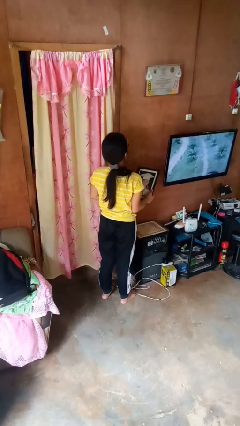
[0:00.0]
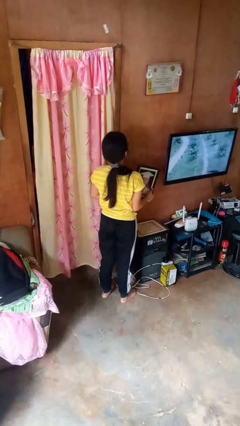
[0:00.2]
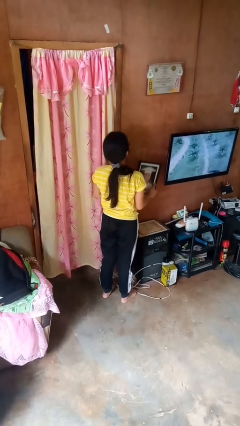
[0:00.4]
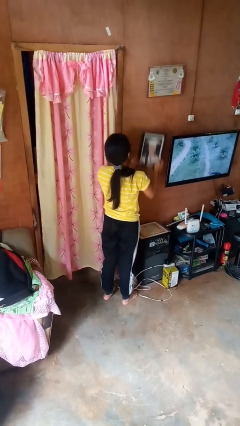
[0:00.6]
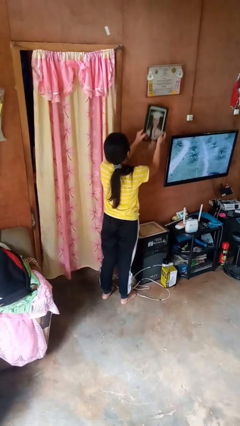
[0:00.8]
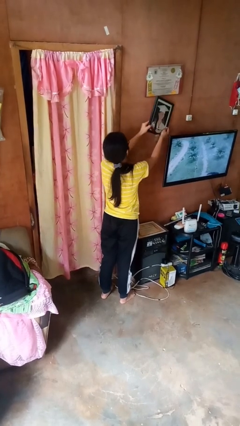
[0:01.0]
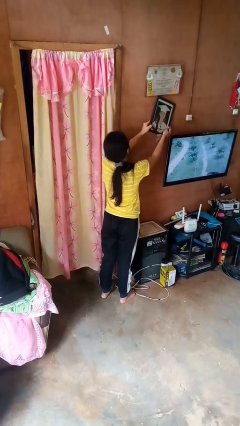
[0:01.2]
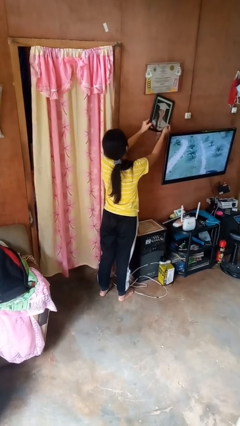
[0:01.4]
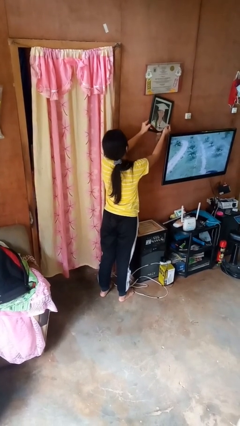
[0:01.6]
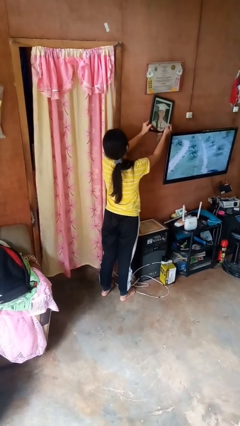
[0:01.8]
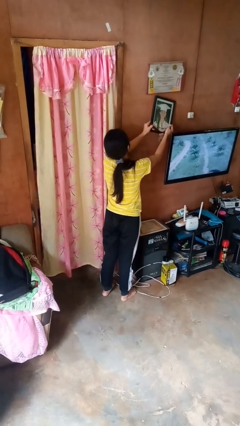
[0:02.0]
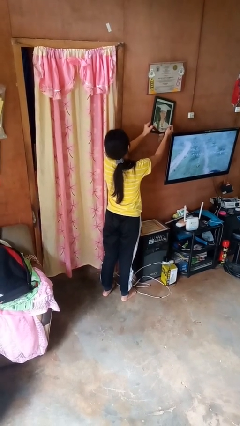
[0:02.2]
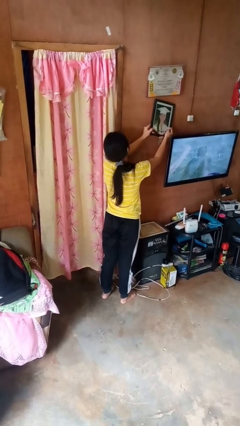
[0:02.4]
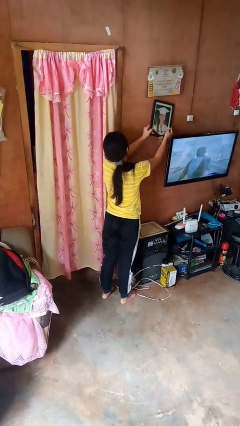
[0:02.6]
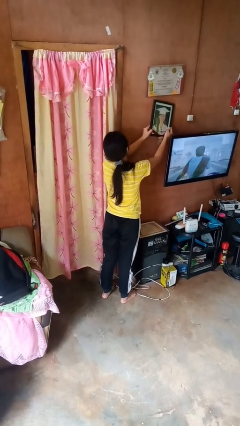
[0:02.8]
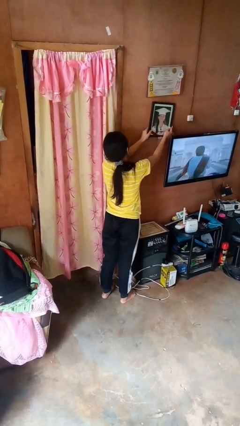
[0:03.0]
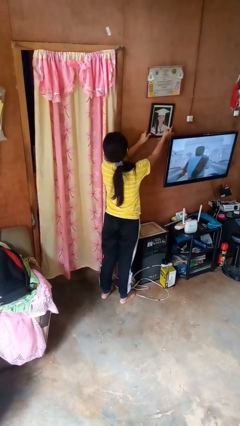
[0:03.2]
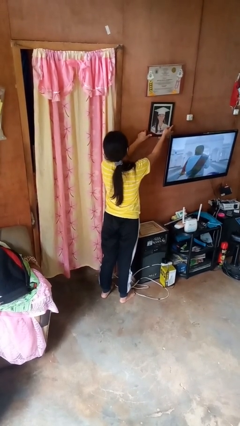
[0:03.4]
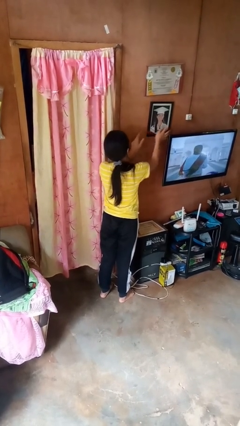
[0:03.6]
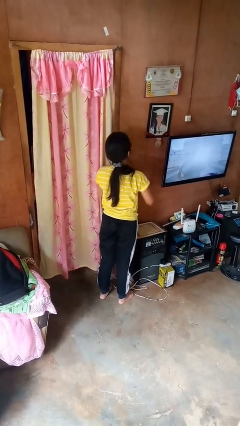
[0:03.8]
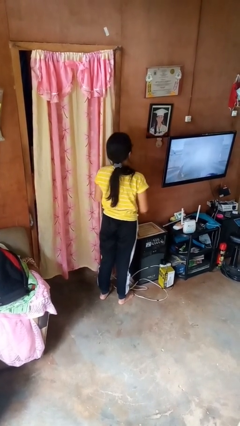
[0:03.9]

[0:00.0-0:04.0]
person puts up picture frame

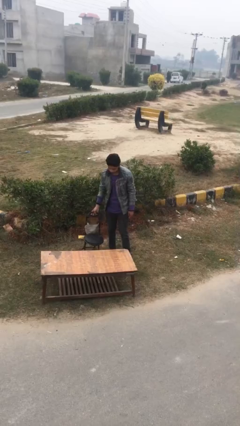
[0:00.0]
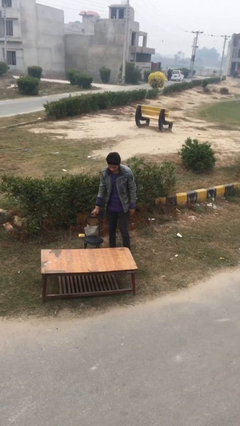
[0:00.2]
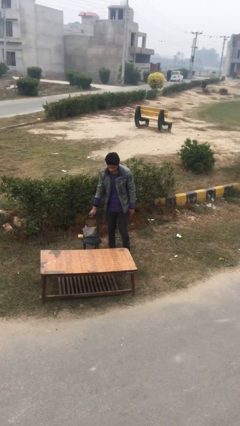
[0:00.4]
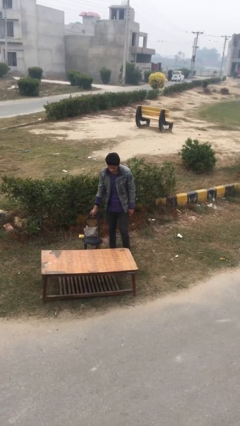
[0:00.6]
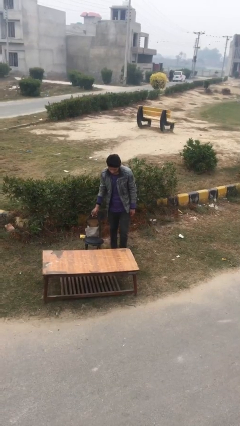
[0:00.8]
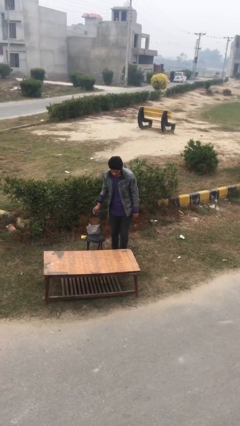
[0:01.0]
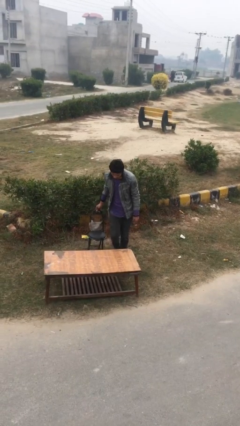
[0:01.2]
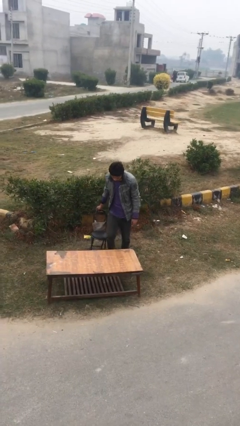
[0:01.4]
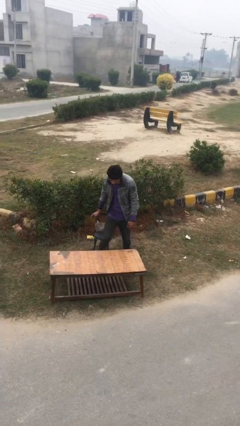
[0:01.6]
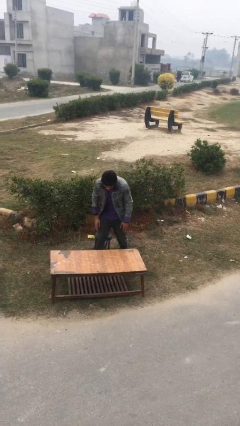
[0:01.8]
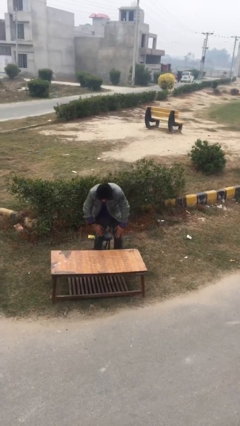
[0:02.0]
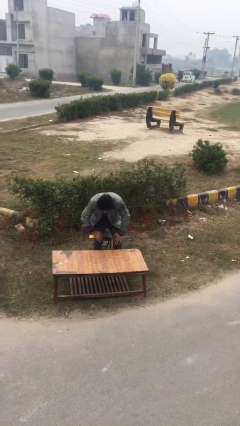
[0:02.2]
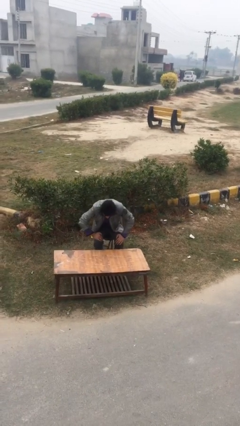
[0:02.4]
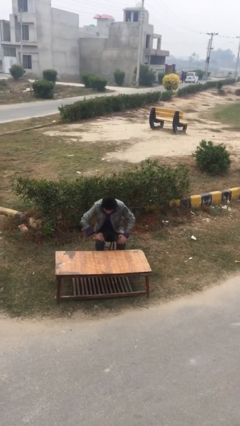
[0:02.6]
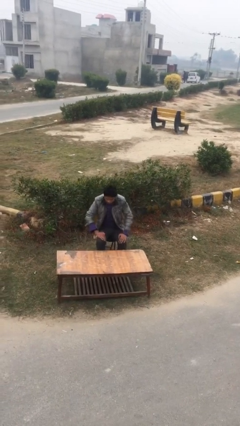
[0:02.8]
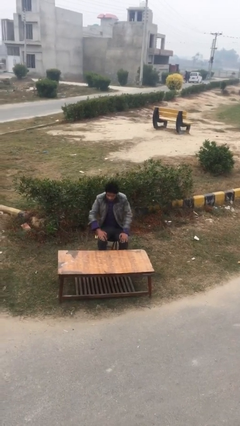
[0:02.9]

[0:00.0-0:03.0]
person sits down

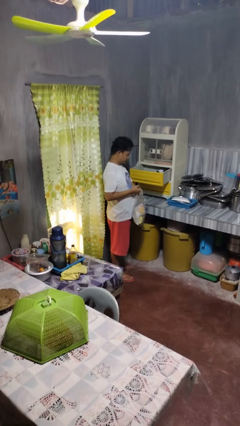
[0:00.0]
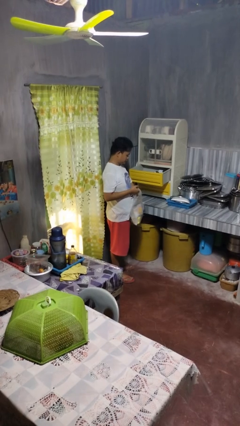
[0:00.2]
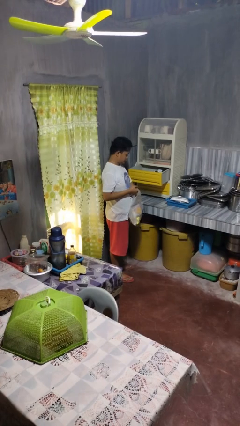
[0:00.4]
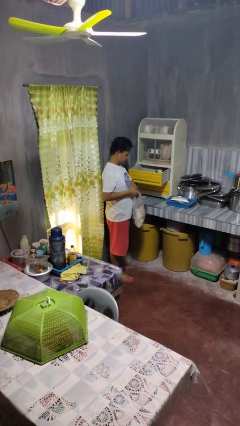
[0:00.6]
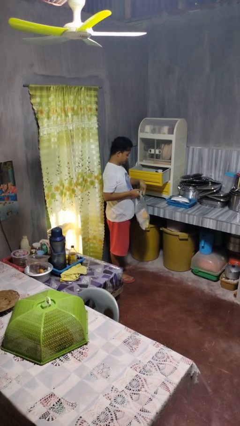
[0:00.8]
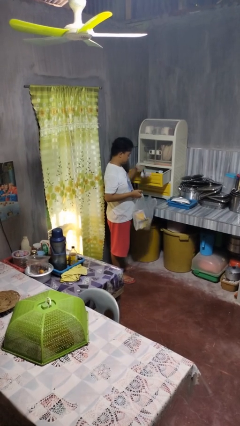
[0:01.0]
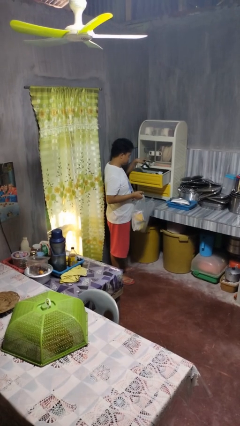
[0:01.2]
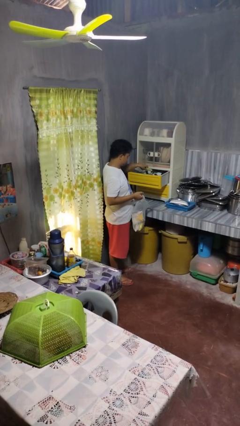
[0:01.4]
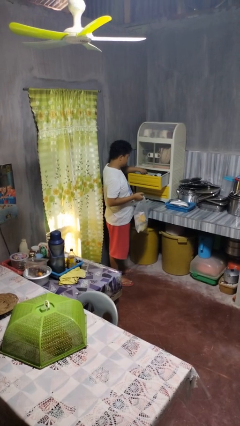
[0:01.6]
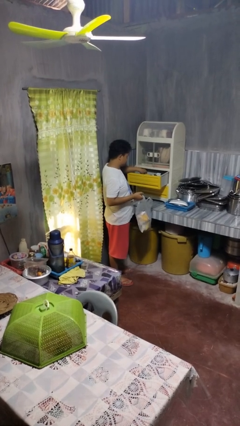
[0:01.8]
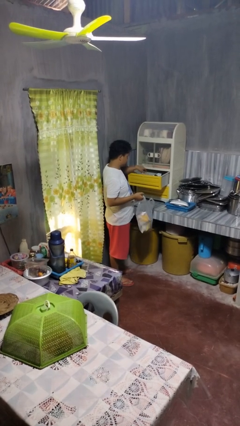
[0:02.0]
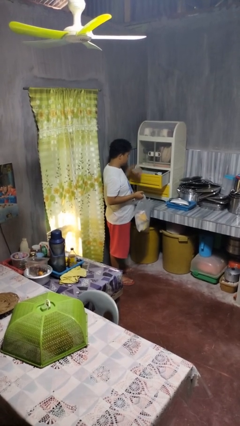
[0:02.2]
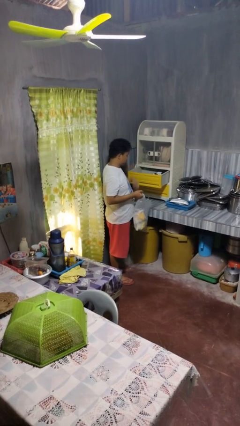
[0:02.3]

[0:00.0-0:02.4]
person loads groceries into cabinet

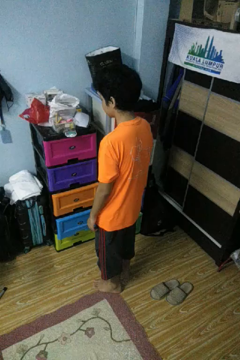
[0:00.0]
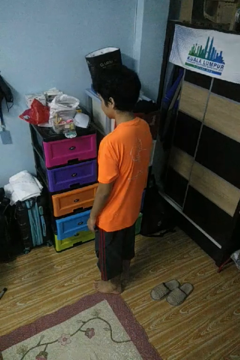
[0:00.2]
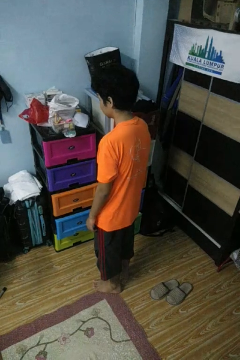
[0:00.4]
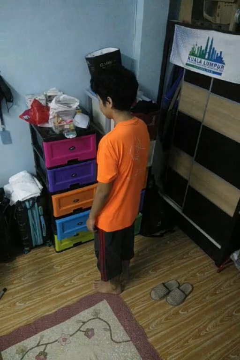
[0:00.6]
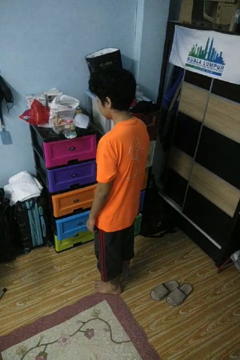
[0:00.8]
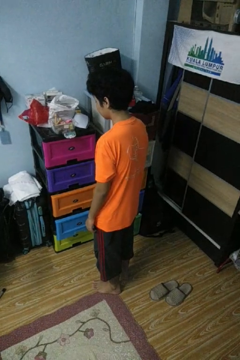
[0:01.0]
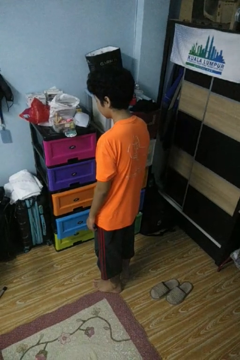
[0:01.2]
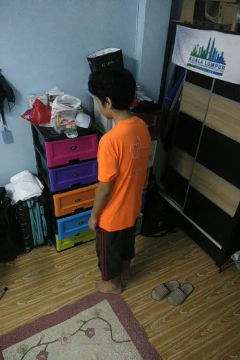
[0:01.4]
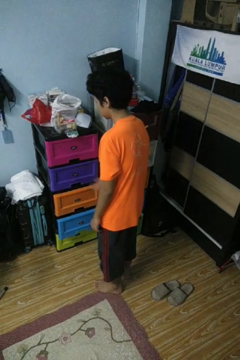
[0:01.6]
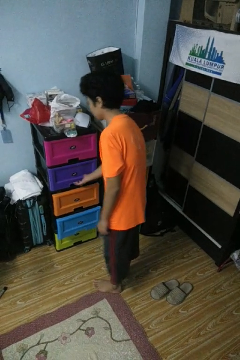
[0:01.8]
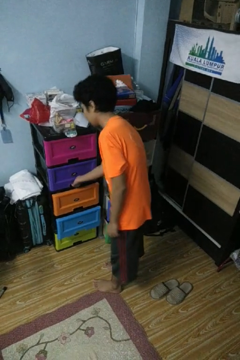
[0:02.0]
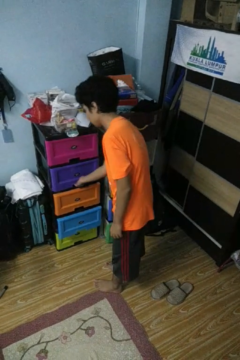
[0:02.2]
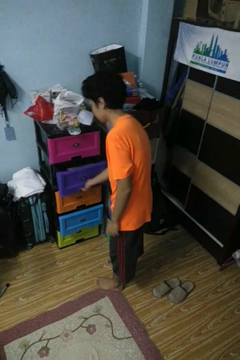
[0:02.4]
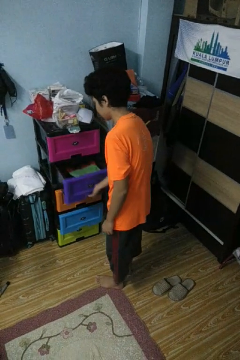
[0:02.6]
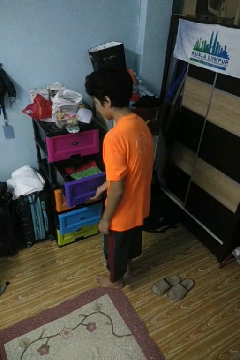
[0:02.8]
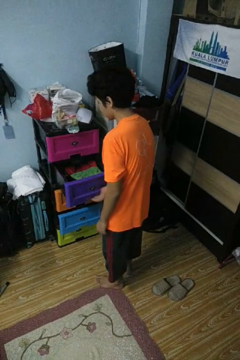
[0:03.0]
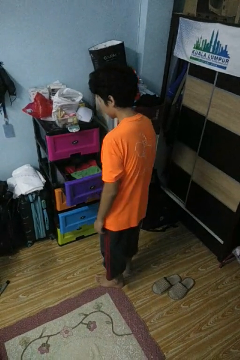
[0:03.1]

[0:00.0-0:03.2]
person opens dresser drawer

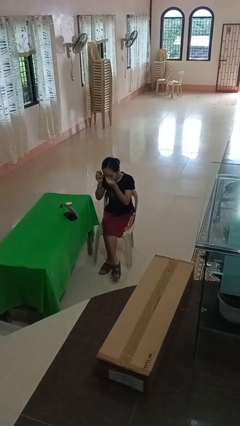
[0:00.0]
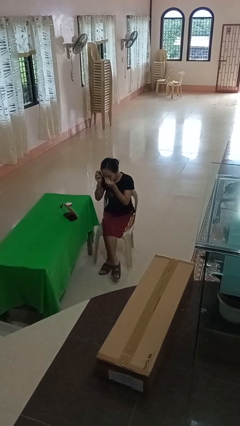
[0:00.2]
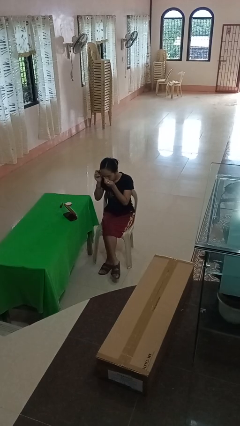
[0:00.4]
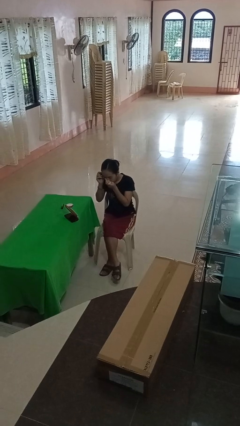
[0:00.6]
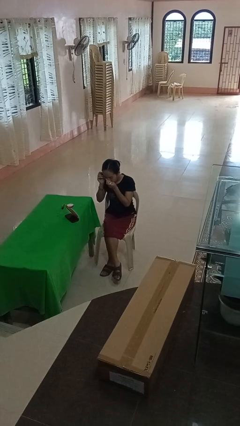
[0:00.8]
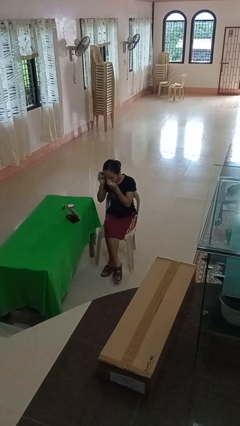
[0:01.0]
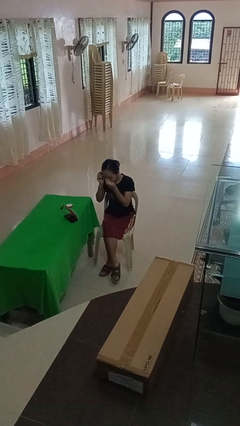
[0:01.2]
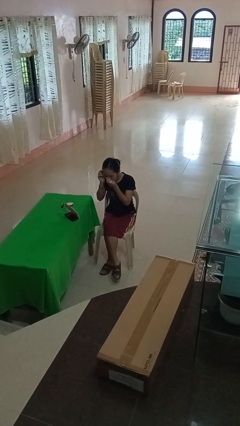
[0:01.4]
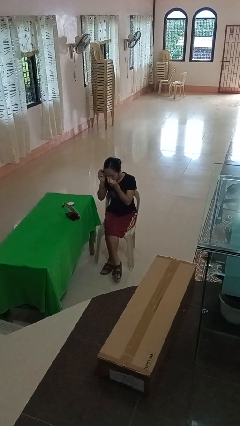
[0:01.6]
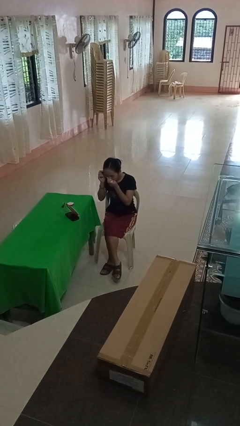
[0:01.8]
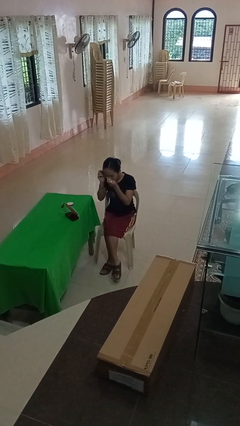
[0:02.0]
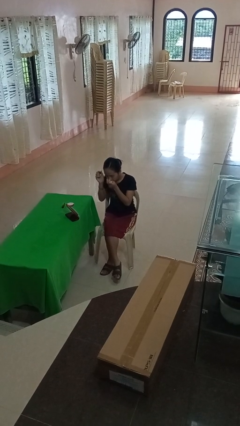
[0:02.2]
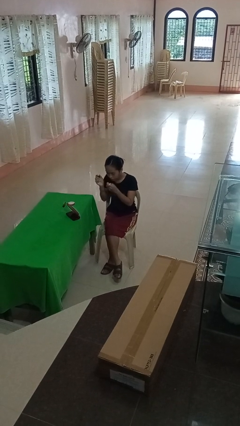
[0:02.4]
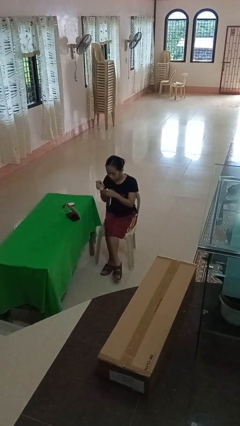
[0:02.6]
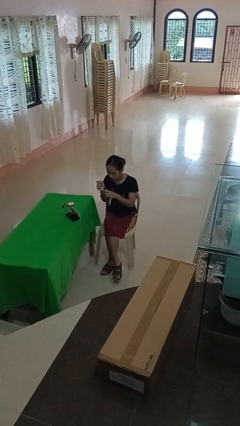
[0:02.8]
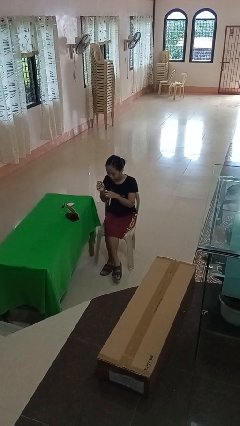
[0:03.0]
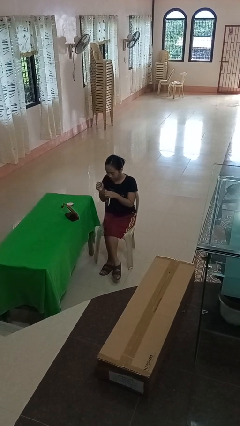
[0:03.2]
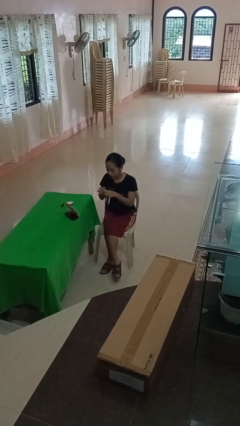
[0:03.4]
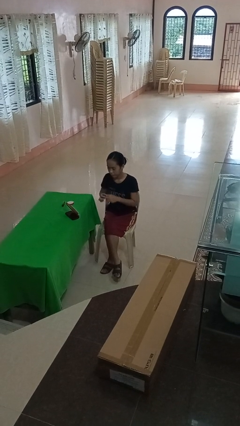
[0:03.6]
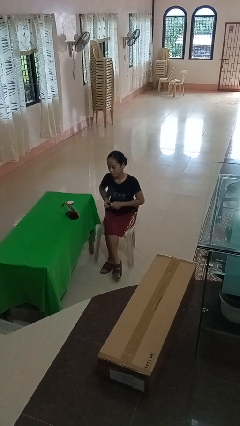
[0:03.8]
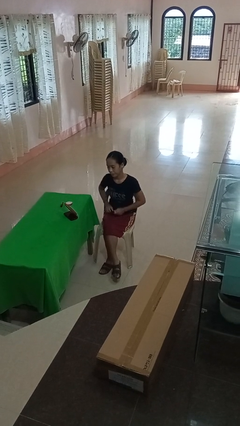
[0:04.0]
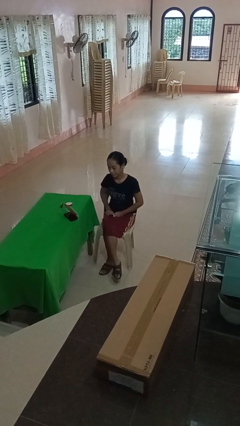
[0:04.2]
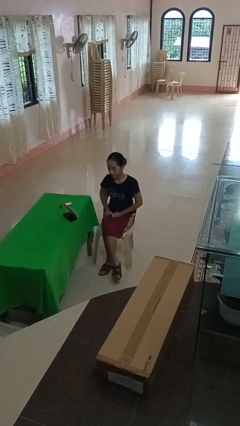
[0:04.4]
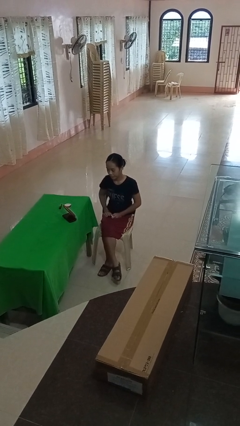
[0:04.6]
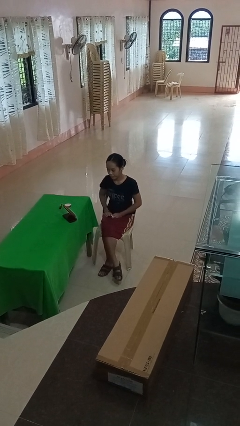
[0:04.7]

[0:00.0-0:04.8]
person applies eye makeup

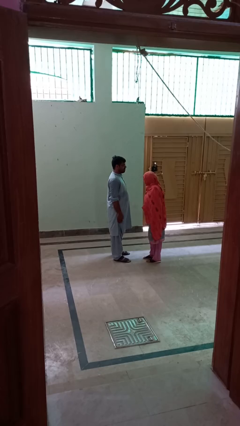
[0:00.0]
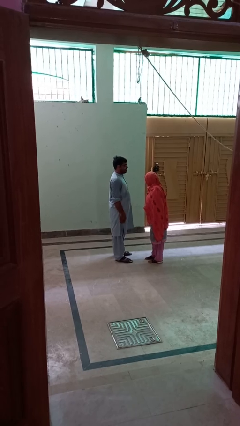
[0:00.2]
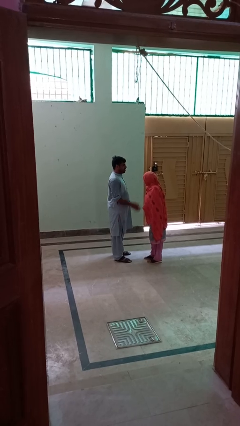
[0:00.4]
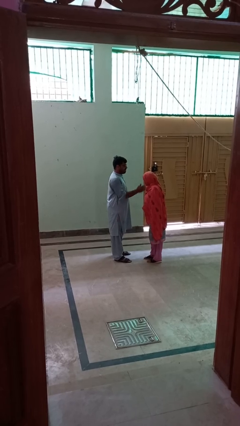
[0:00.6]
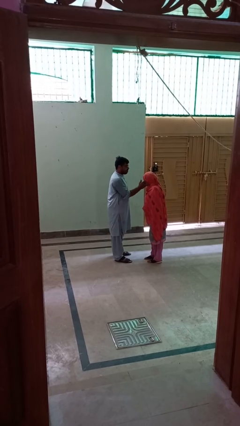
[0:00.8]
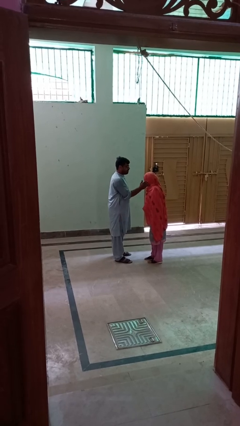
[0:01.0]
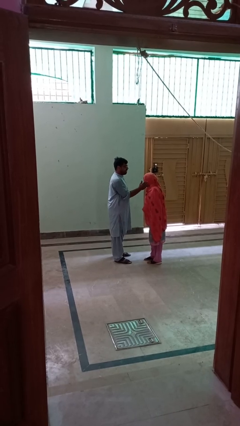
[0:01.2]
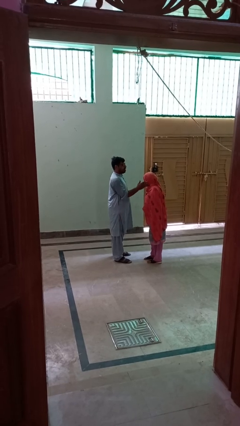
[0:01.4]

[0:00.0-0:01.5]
person touches face of person
